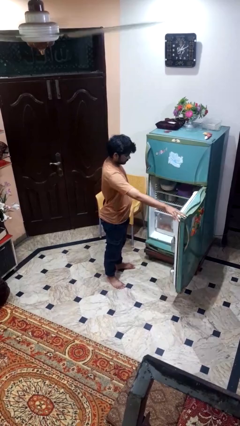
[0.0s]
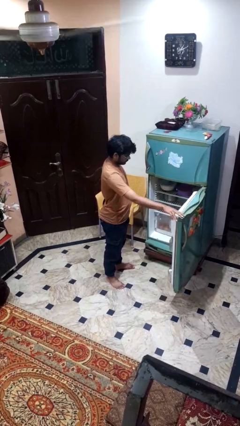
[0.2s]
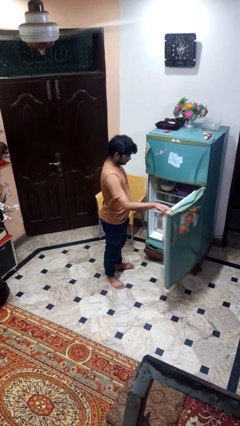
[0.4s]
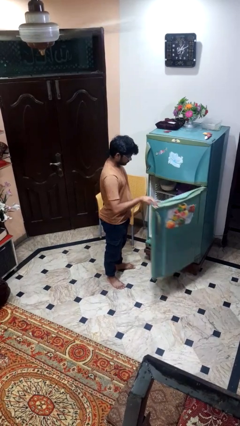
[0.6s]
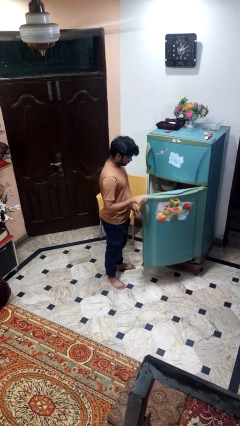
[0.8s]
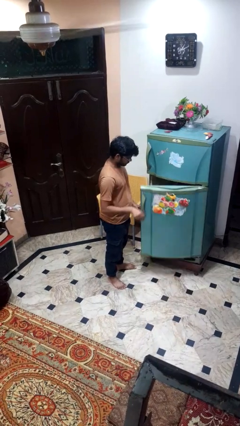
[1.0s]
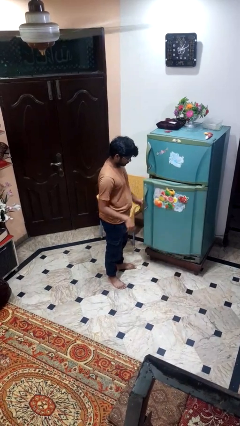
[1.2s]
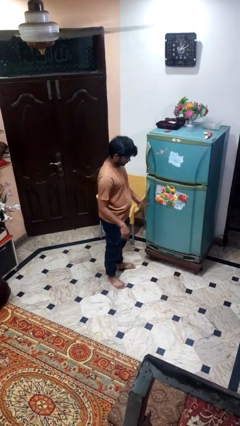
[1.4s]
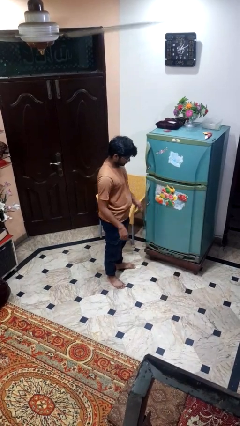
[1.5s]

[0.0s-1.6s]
person closes refrigerator

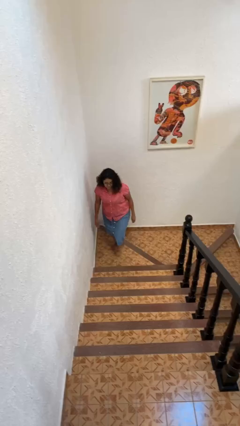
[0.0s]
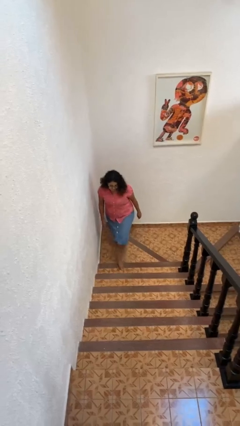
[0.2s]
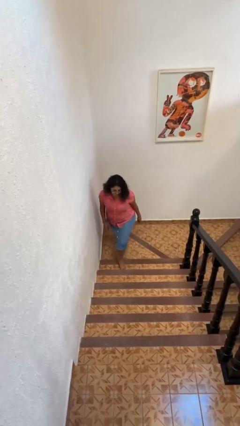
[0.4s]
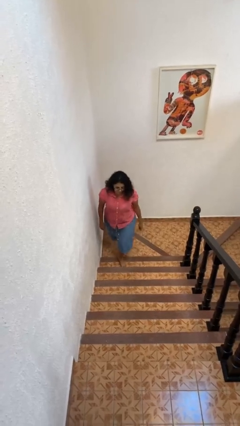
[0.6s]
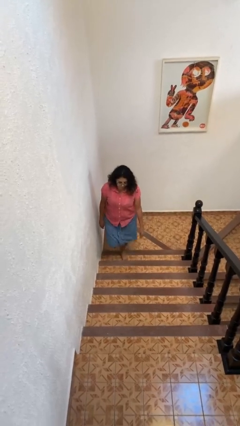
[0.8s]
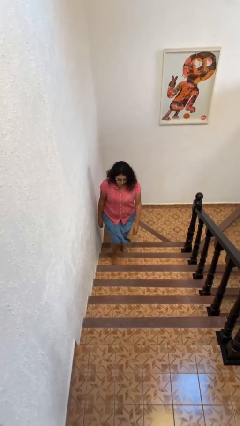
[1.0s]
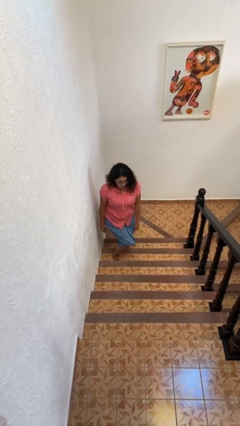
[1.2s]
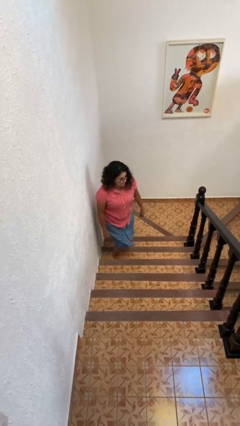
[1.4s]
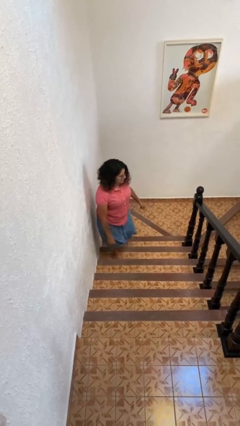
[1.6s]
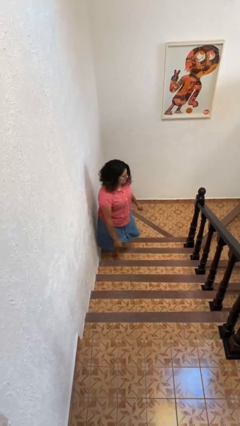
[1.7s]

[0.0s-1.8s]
person climbs up stairs

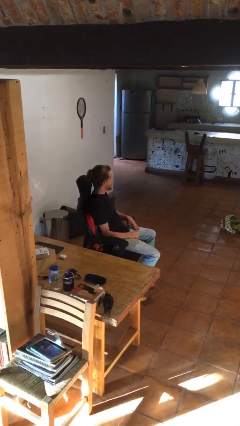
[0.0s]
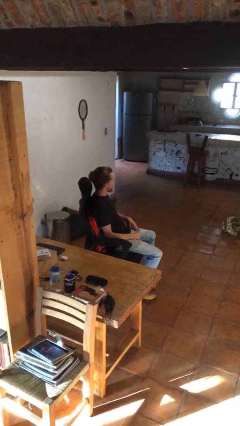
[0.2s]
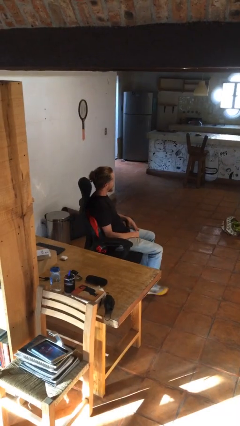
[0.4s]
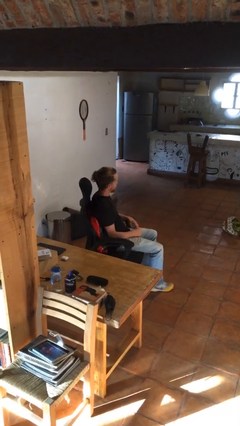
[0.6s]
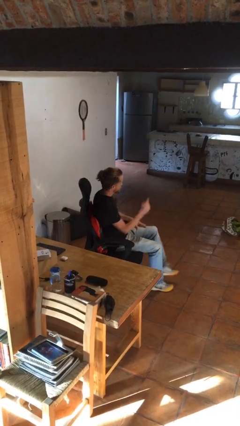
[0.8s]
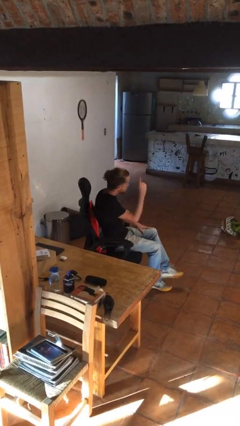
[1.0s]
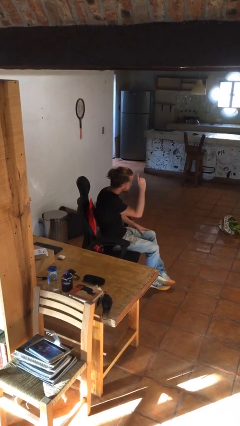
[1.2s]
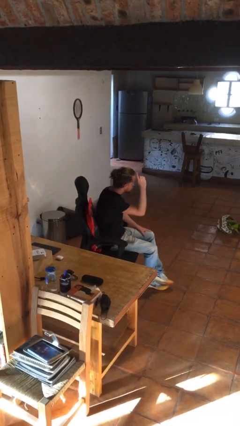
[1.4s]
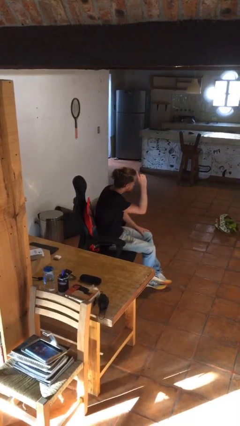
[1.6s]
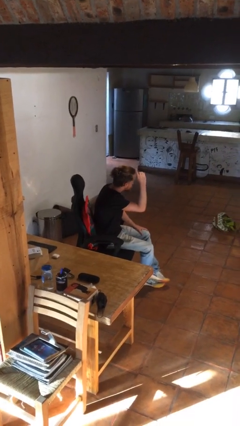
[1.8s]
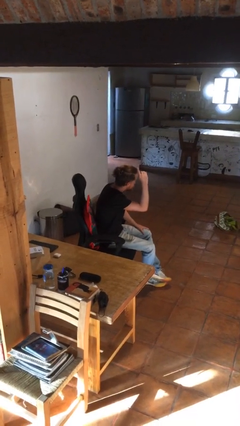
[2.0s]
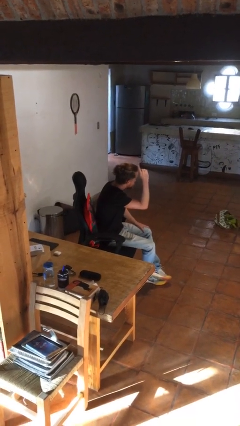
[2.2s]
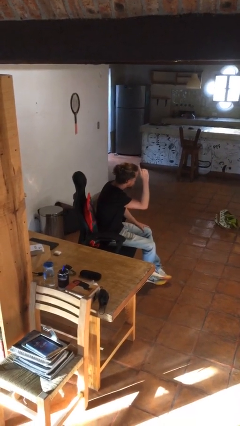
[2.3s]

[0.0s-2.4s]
person gestures raise hand

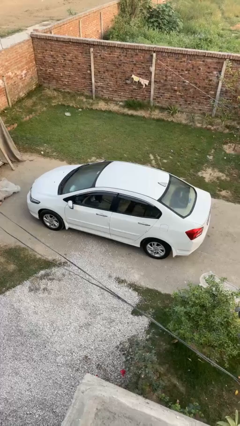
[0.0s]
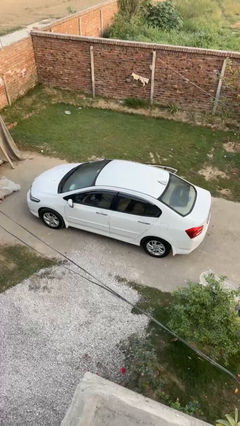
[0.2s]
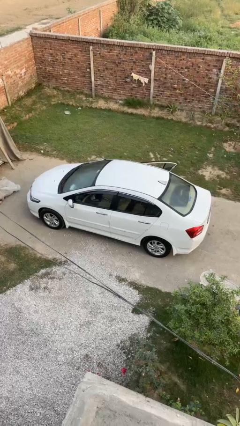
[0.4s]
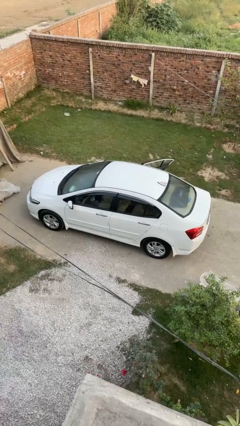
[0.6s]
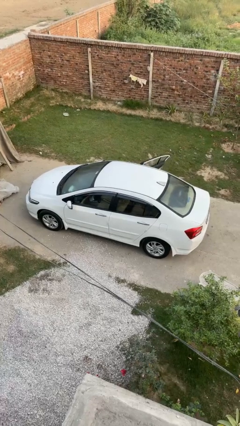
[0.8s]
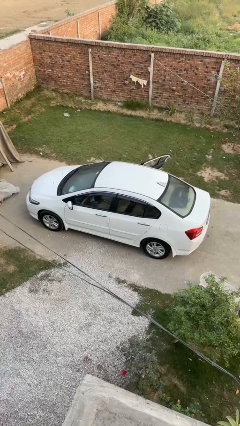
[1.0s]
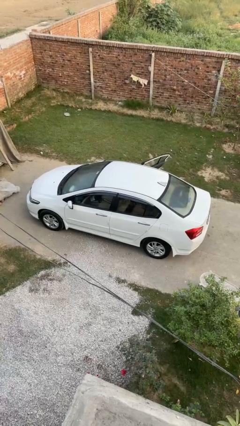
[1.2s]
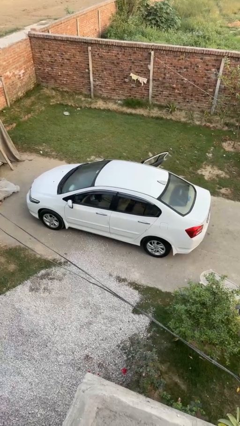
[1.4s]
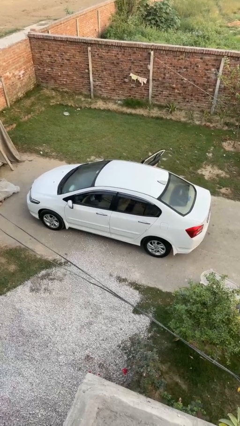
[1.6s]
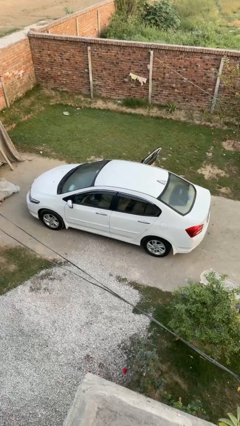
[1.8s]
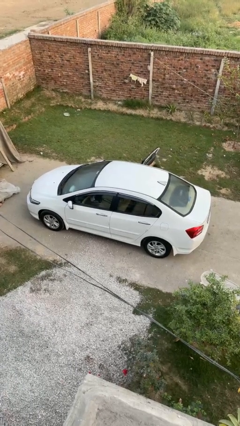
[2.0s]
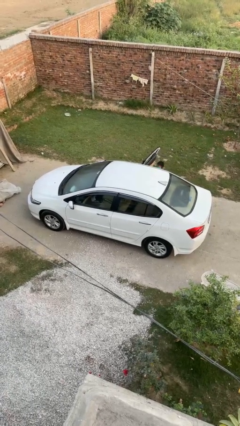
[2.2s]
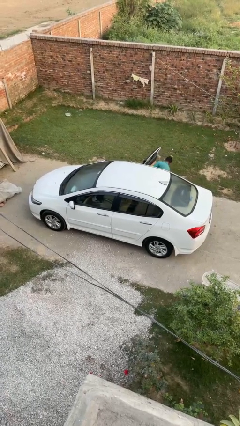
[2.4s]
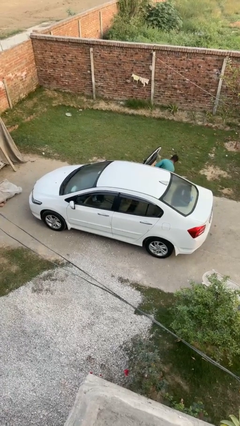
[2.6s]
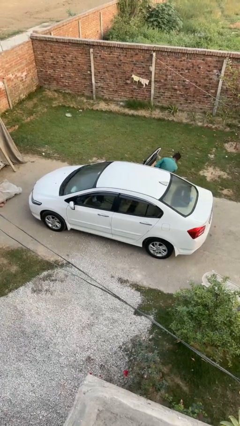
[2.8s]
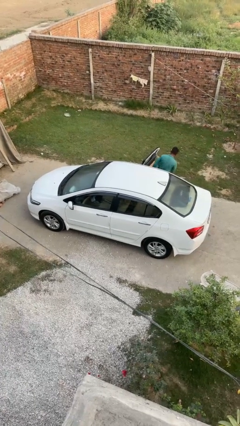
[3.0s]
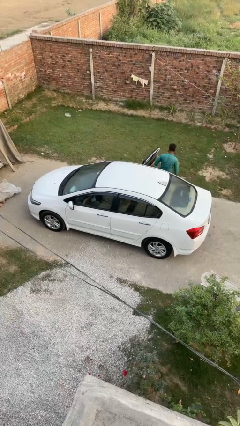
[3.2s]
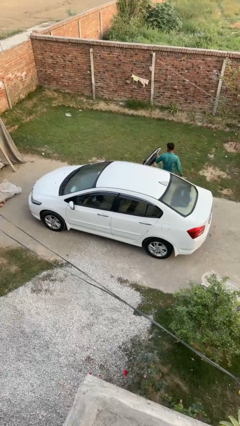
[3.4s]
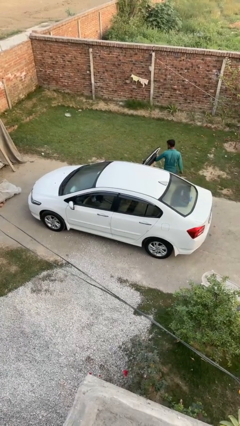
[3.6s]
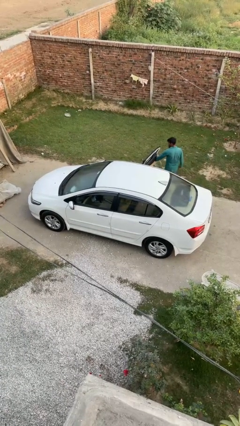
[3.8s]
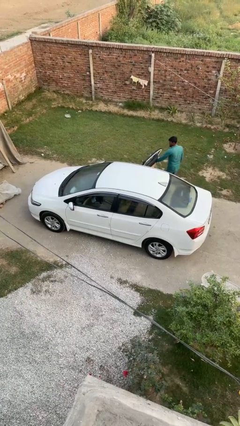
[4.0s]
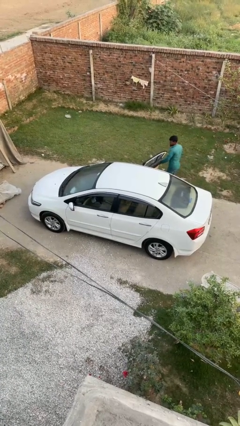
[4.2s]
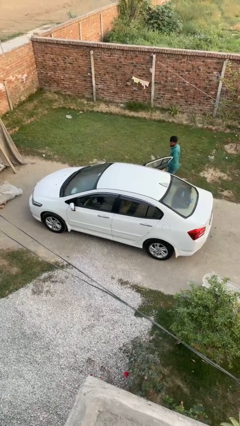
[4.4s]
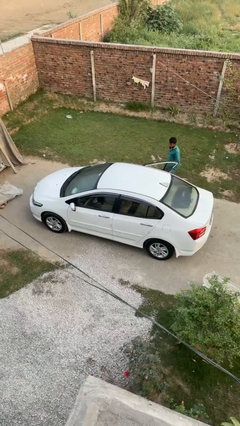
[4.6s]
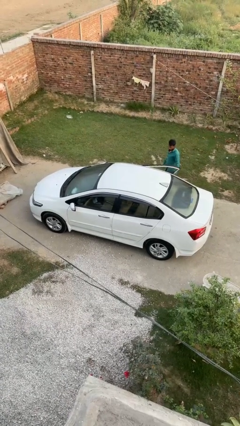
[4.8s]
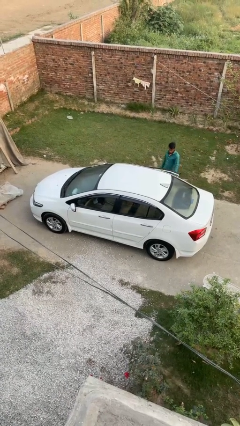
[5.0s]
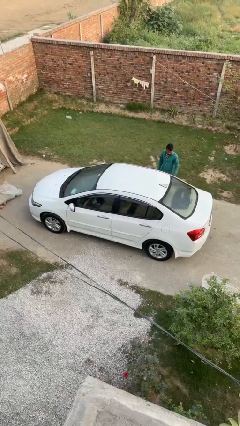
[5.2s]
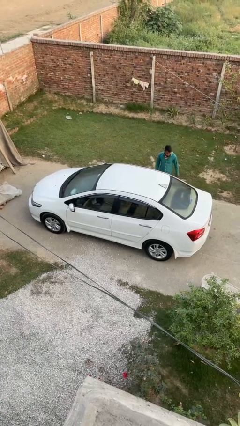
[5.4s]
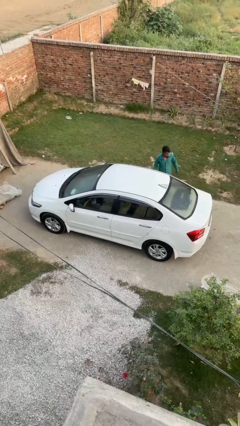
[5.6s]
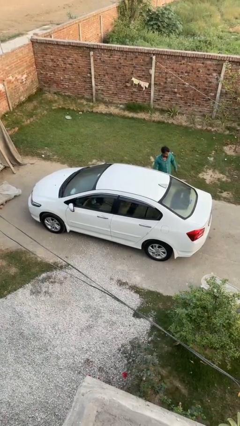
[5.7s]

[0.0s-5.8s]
car drops off person

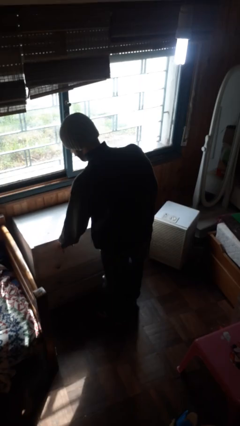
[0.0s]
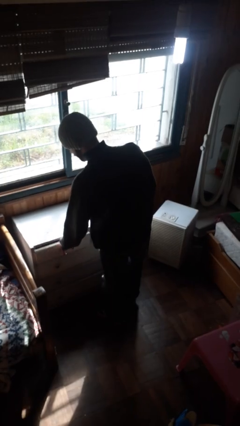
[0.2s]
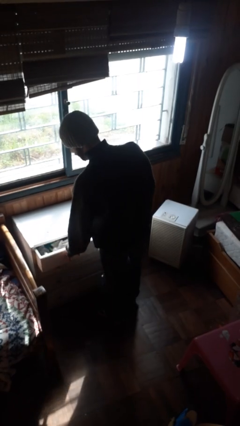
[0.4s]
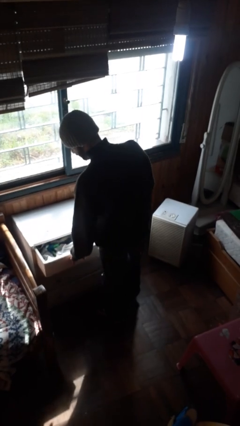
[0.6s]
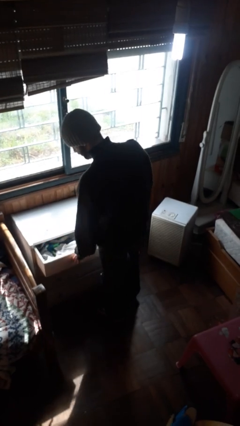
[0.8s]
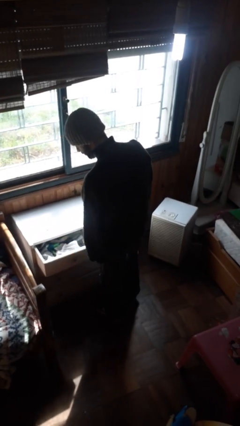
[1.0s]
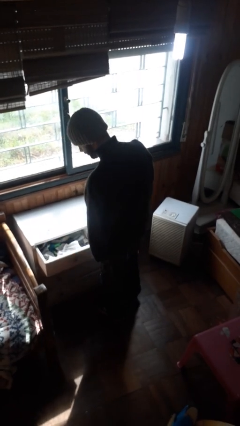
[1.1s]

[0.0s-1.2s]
person opens dresser drawer

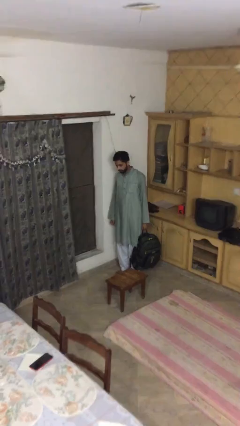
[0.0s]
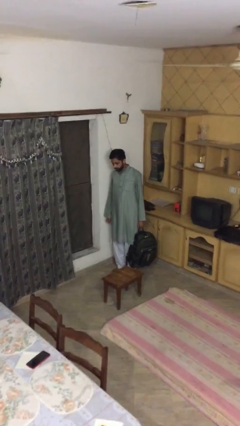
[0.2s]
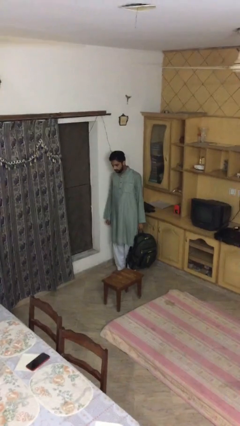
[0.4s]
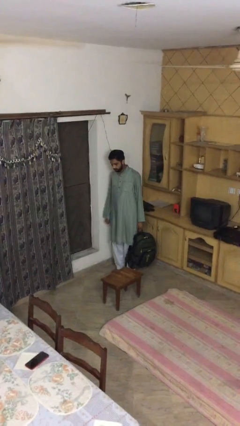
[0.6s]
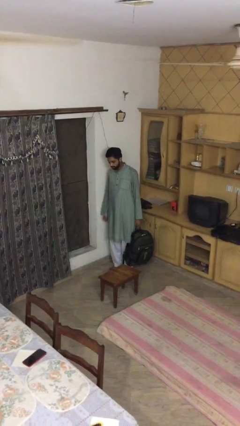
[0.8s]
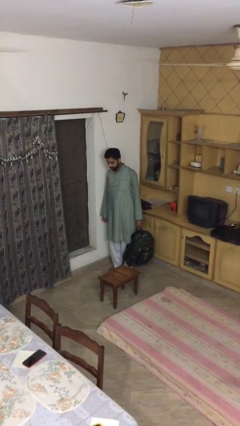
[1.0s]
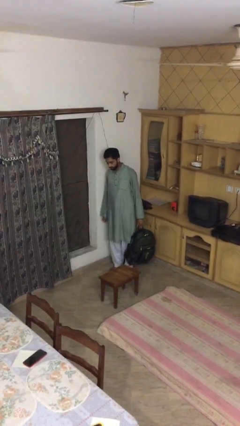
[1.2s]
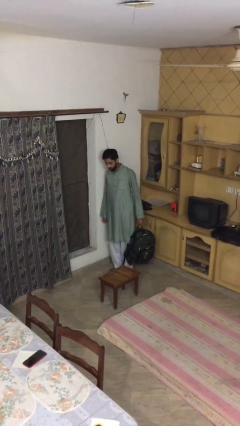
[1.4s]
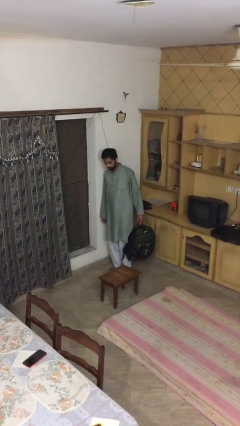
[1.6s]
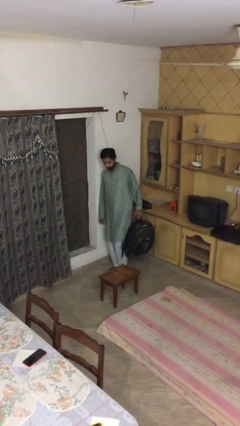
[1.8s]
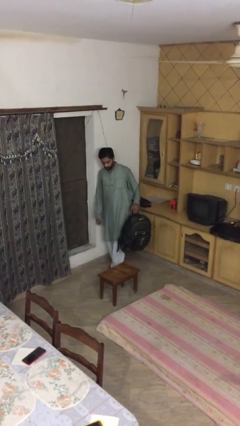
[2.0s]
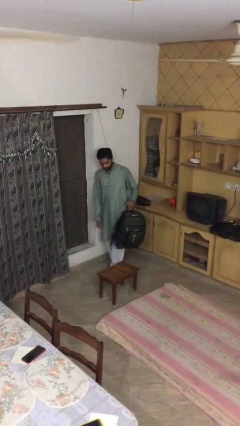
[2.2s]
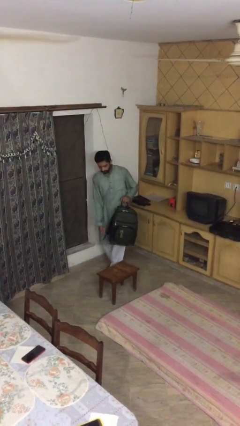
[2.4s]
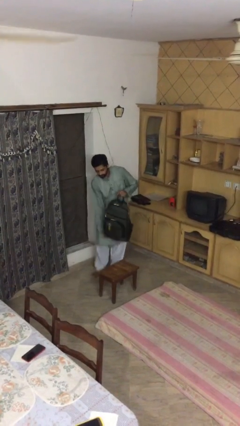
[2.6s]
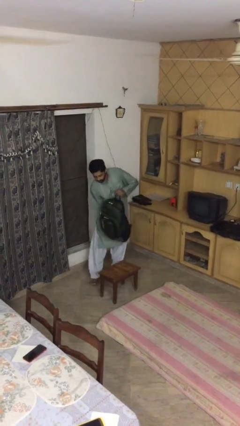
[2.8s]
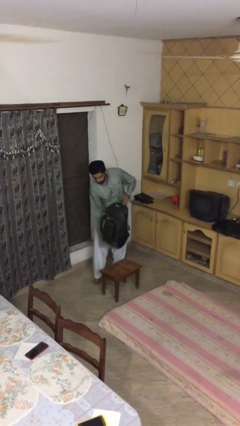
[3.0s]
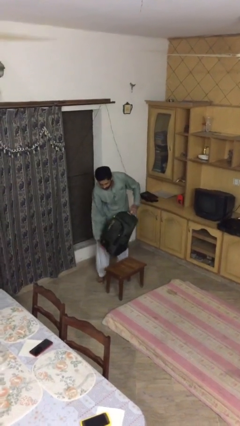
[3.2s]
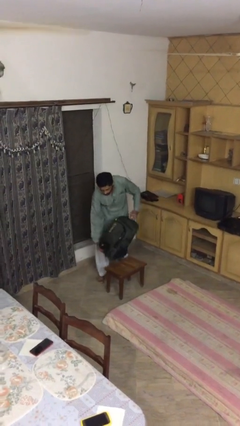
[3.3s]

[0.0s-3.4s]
person puts down object on table

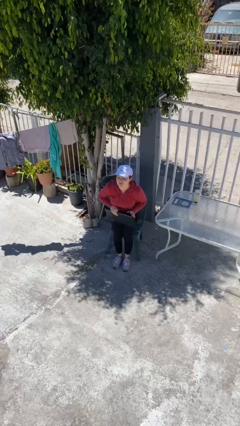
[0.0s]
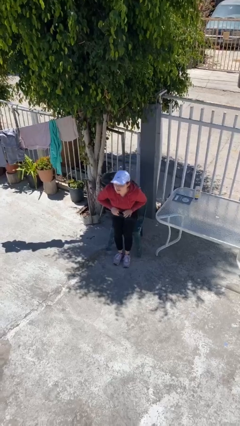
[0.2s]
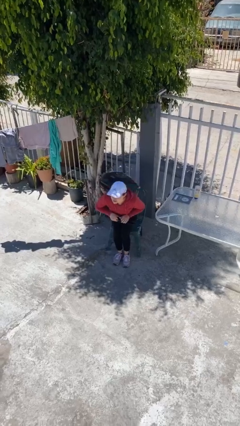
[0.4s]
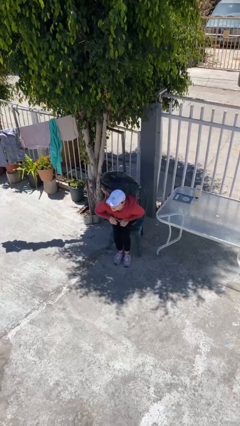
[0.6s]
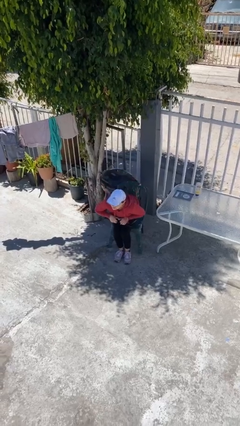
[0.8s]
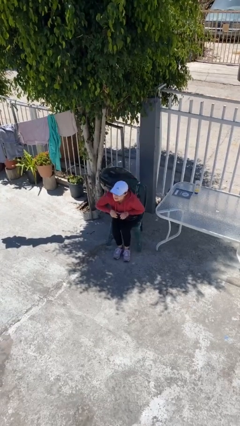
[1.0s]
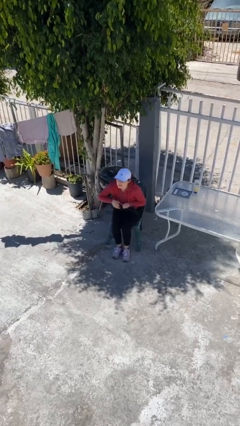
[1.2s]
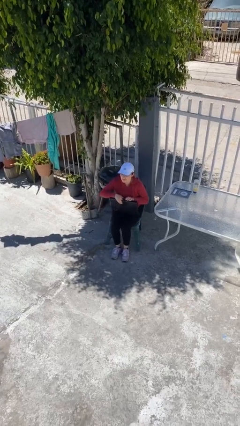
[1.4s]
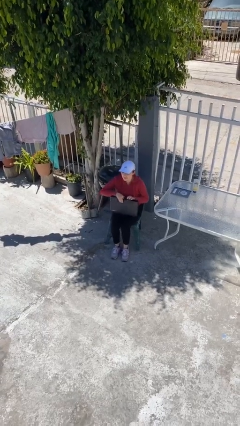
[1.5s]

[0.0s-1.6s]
person sits down
